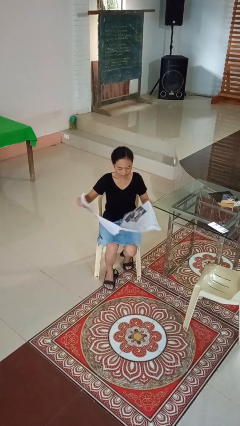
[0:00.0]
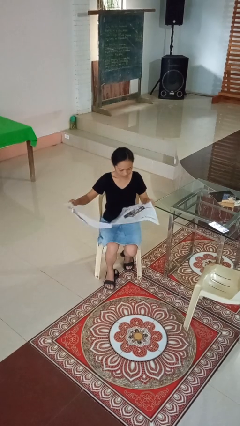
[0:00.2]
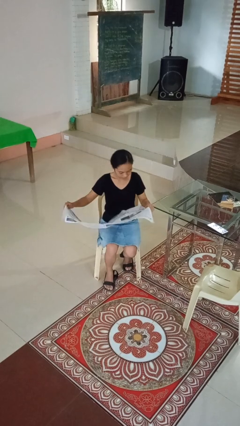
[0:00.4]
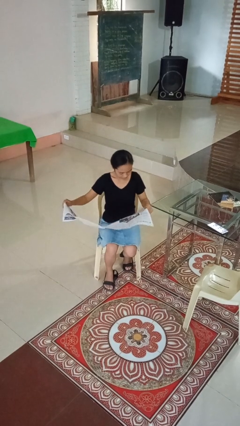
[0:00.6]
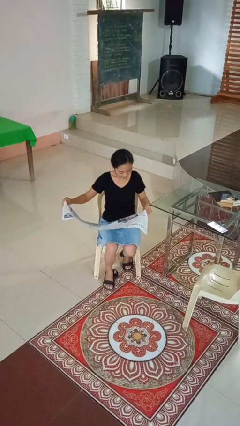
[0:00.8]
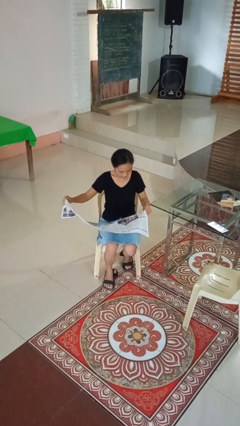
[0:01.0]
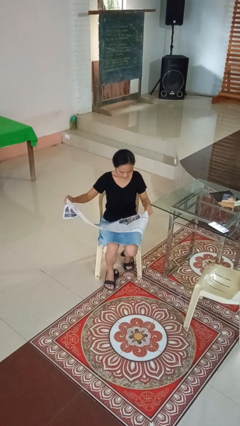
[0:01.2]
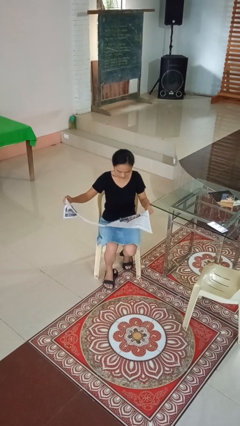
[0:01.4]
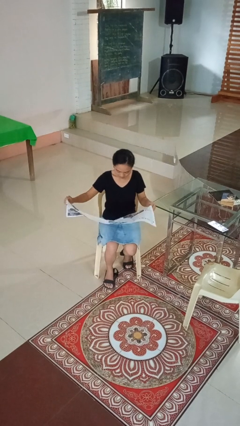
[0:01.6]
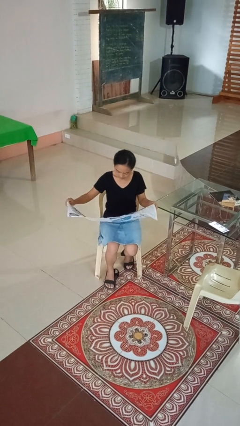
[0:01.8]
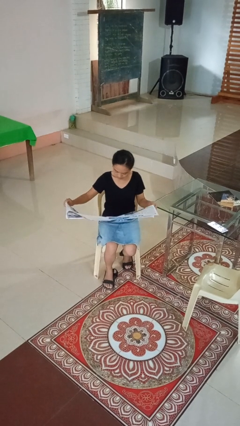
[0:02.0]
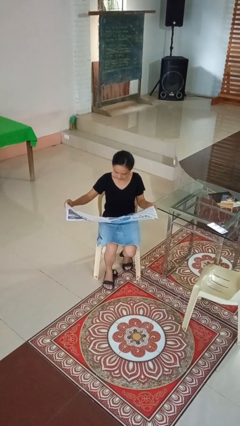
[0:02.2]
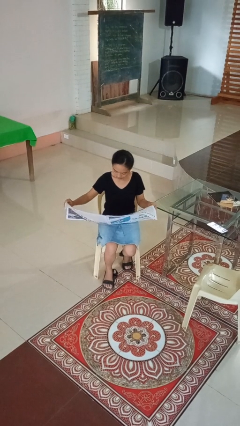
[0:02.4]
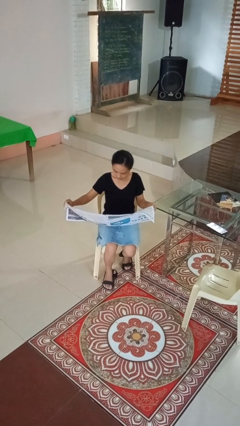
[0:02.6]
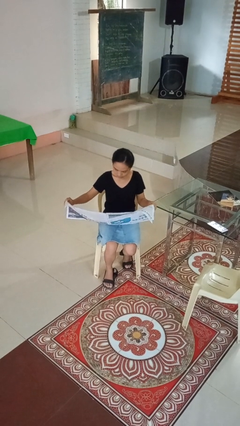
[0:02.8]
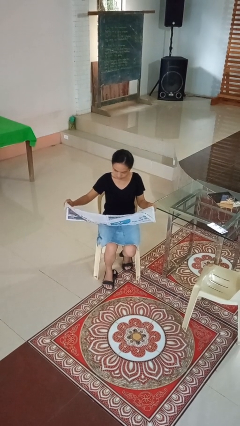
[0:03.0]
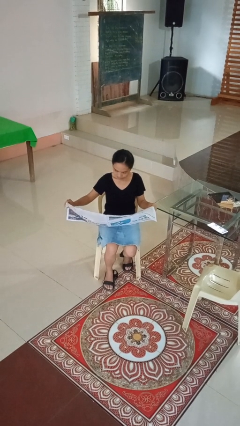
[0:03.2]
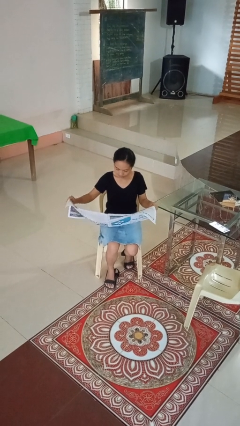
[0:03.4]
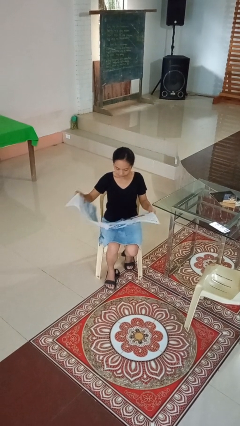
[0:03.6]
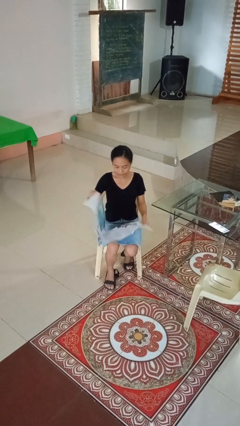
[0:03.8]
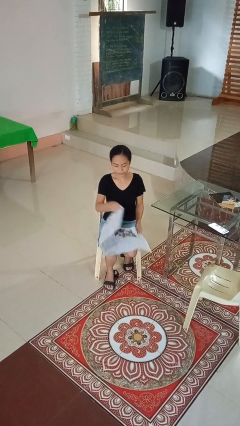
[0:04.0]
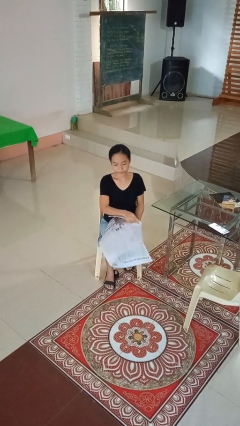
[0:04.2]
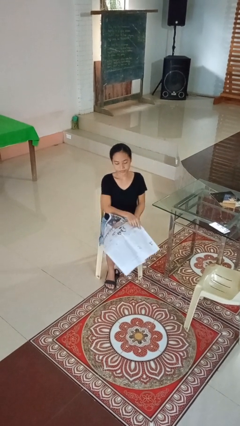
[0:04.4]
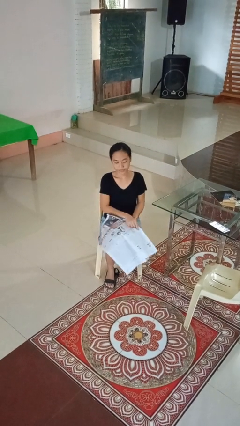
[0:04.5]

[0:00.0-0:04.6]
person reads newspaper

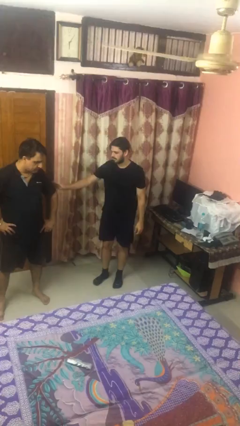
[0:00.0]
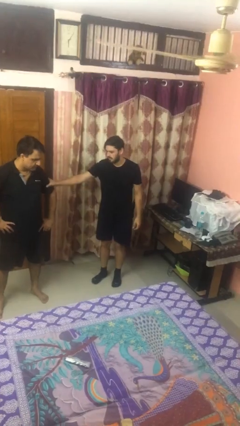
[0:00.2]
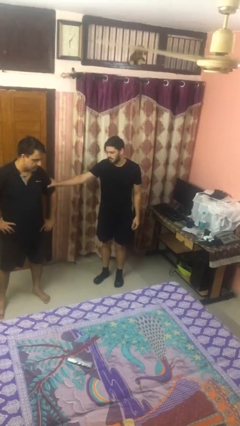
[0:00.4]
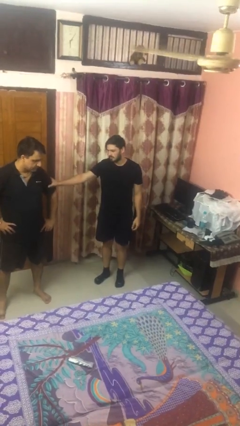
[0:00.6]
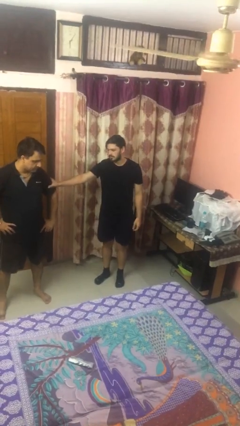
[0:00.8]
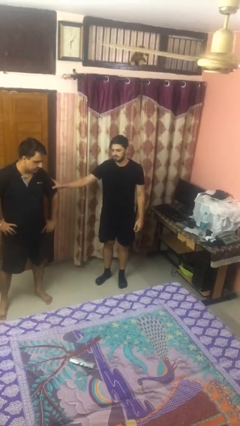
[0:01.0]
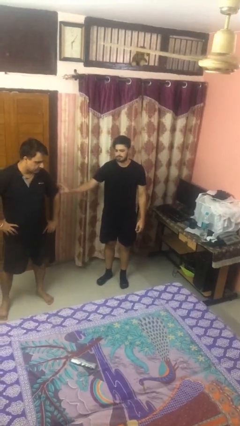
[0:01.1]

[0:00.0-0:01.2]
person grabs person by bicep

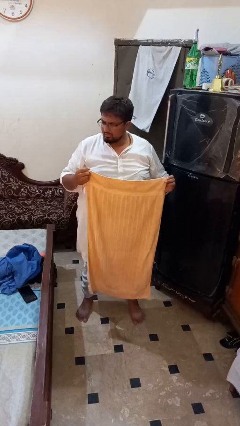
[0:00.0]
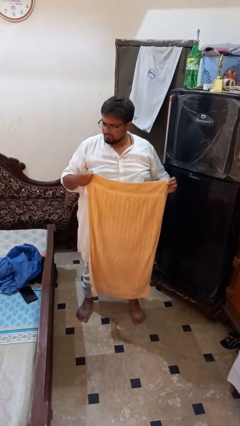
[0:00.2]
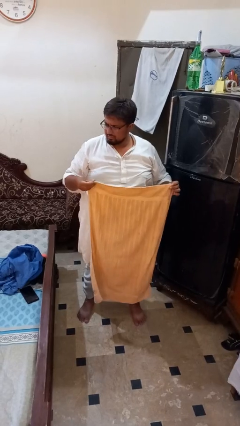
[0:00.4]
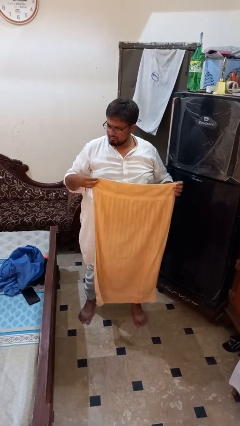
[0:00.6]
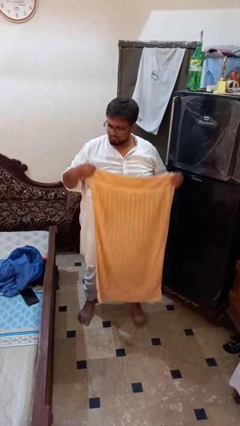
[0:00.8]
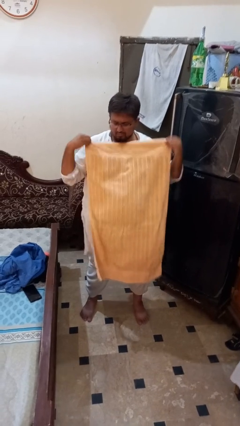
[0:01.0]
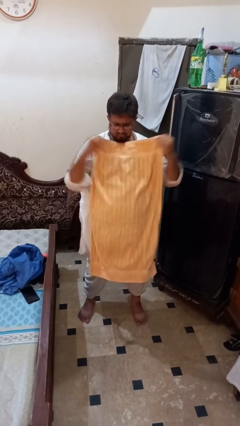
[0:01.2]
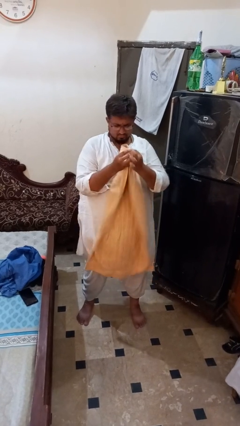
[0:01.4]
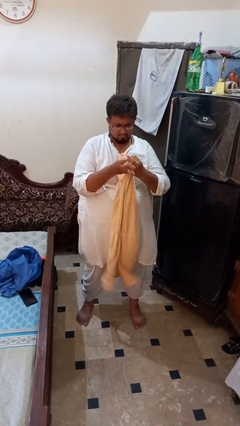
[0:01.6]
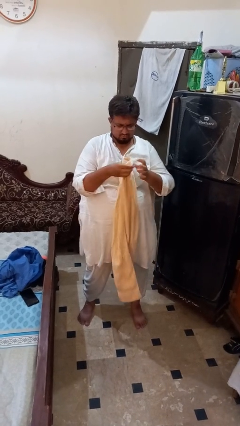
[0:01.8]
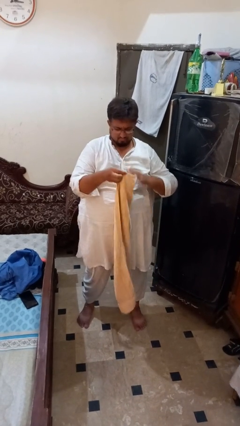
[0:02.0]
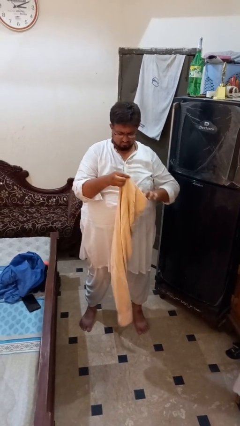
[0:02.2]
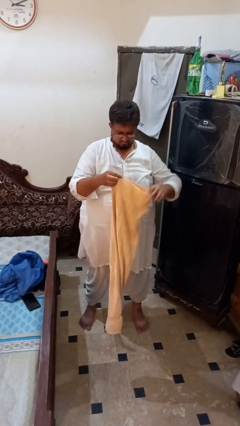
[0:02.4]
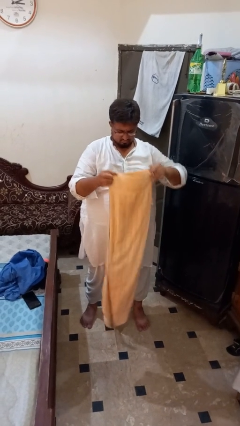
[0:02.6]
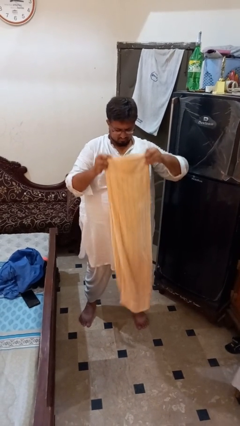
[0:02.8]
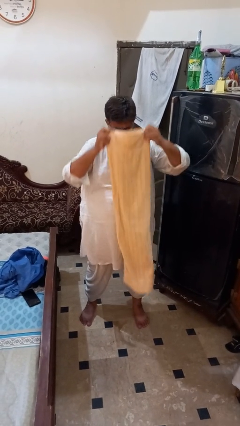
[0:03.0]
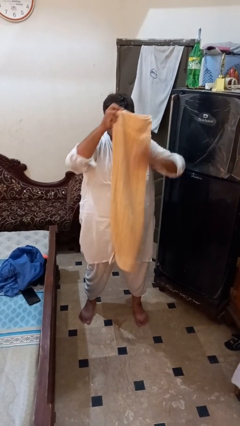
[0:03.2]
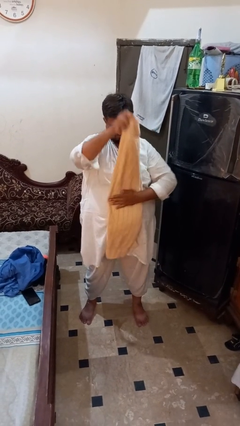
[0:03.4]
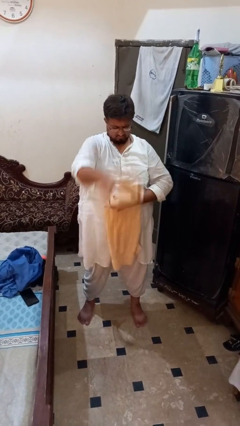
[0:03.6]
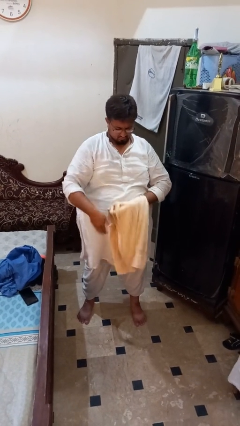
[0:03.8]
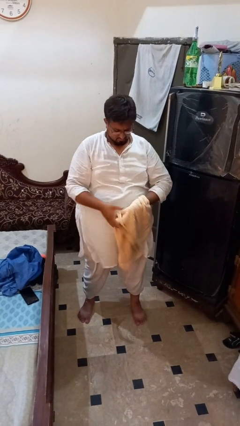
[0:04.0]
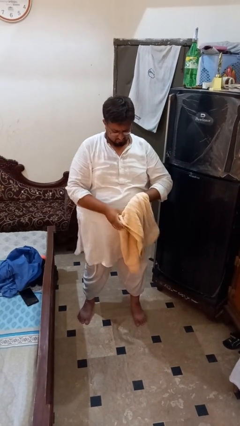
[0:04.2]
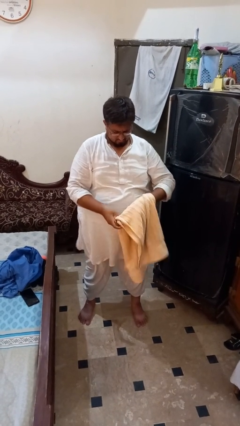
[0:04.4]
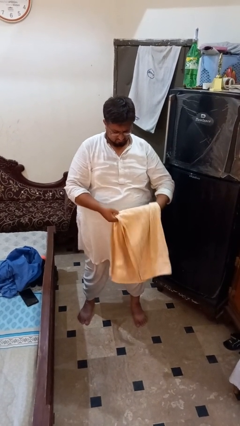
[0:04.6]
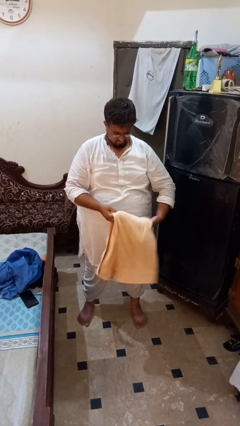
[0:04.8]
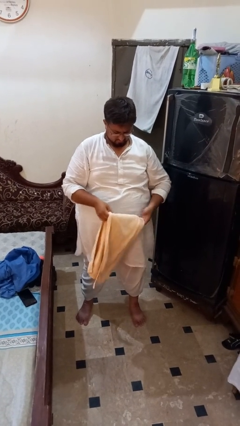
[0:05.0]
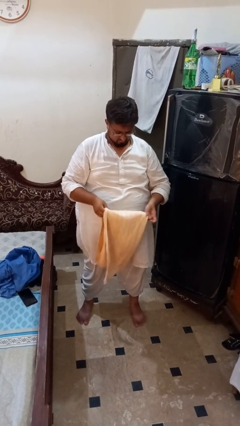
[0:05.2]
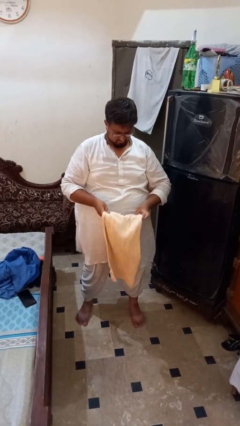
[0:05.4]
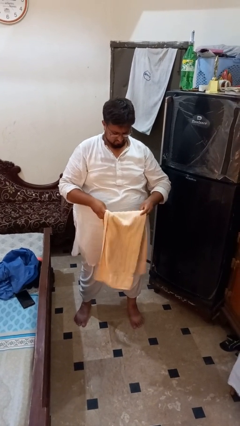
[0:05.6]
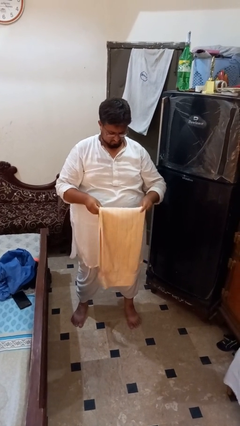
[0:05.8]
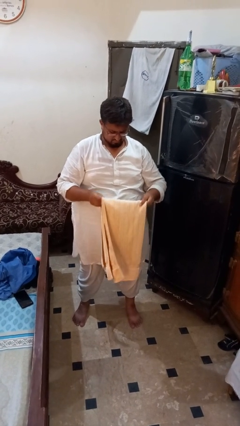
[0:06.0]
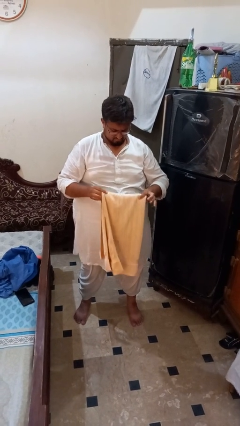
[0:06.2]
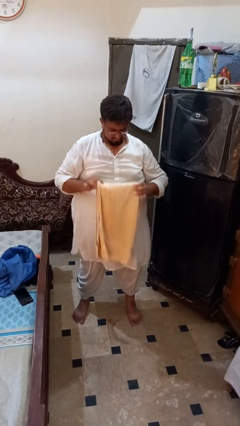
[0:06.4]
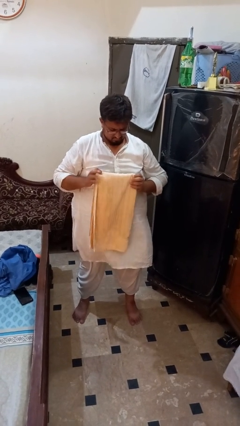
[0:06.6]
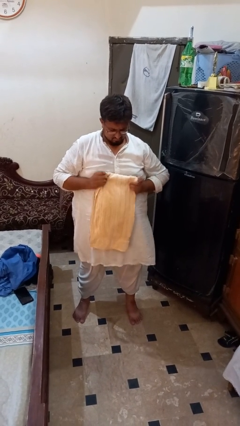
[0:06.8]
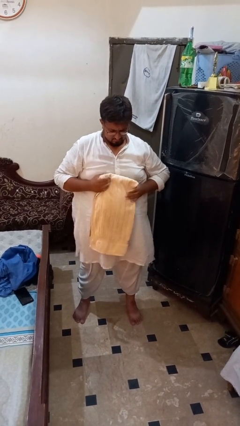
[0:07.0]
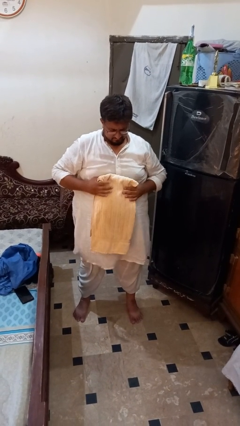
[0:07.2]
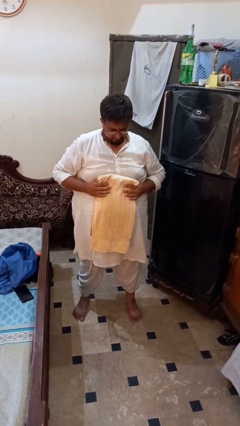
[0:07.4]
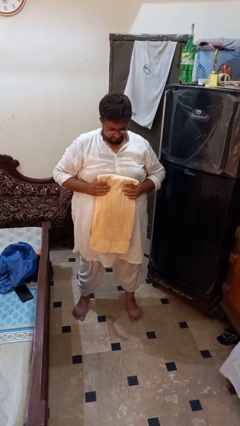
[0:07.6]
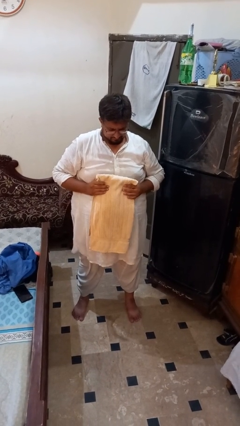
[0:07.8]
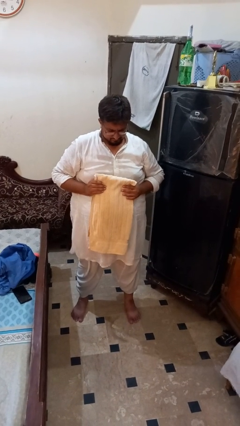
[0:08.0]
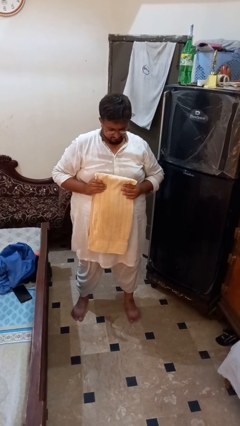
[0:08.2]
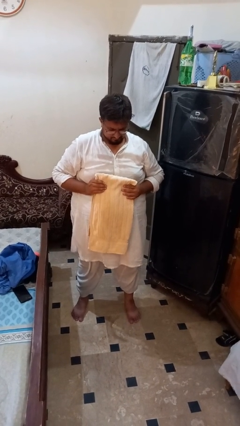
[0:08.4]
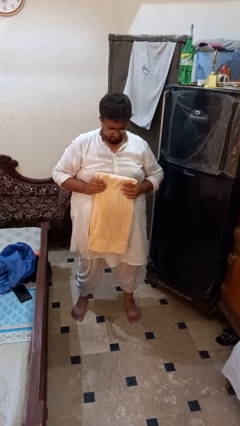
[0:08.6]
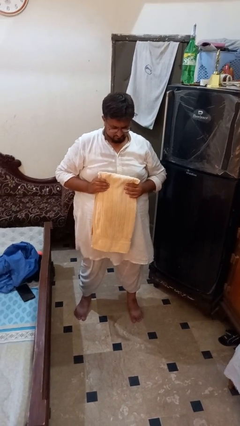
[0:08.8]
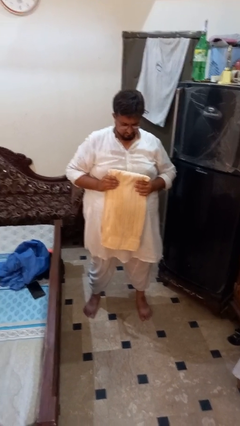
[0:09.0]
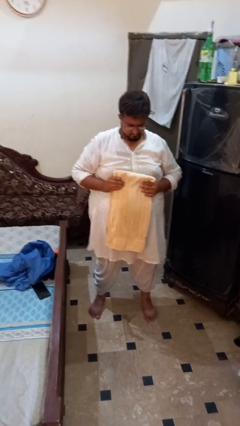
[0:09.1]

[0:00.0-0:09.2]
person folds towel

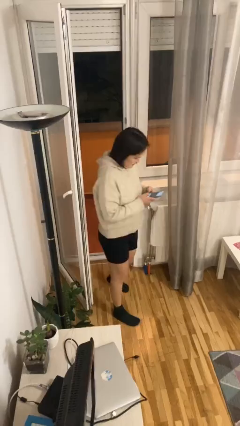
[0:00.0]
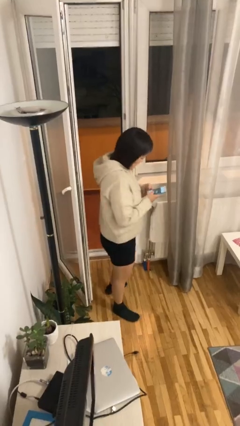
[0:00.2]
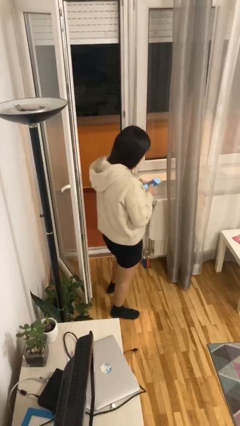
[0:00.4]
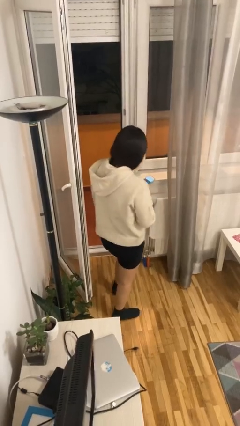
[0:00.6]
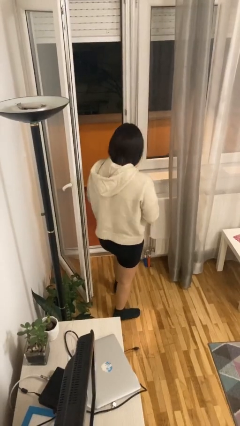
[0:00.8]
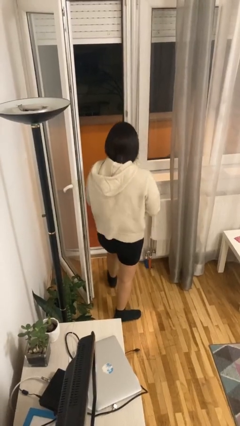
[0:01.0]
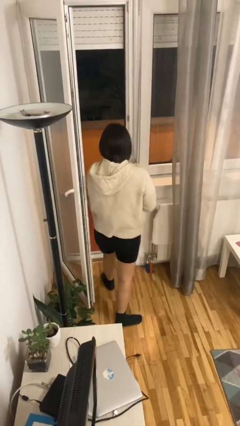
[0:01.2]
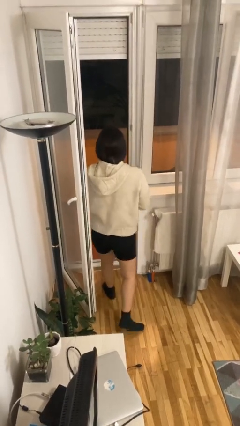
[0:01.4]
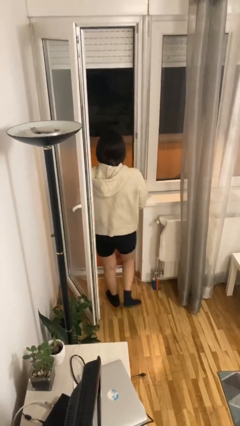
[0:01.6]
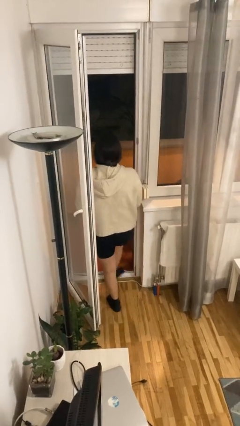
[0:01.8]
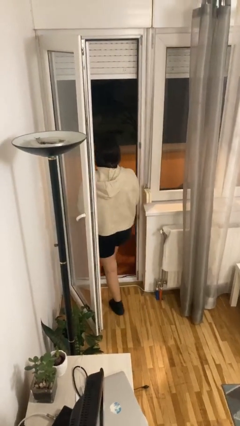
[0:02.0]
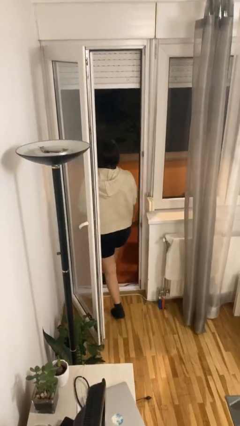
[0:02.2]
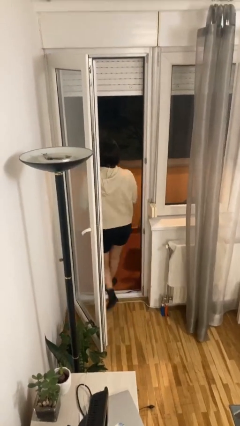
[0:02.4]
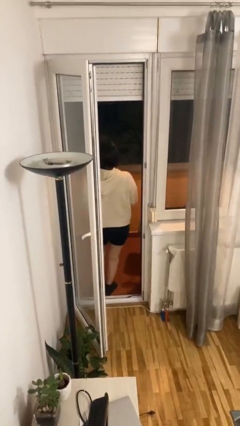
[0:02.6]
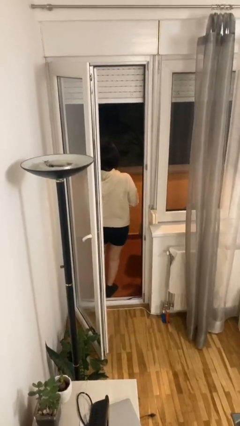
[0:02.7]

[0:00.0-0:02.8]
person exits scene through structure

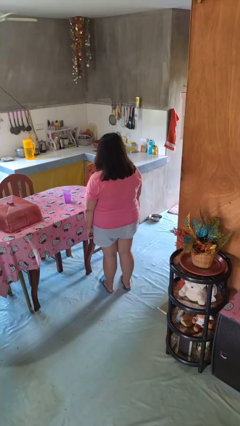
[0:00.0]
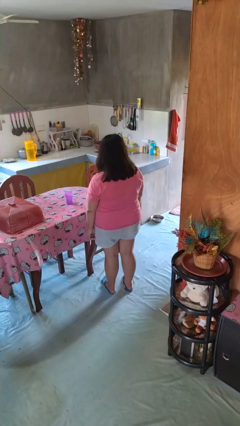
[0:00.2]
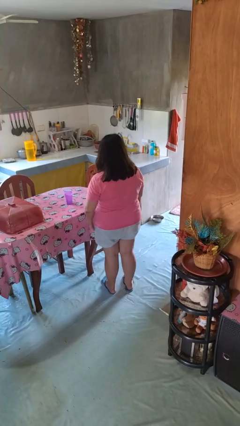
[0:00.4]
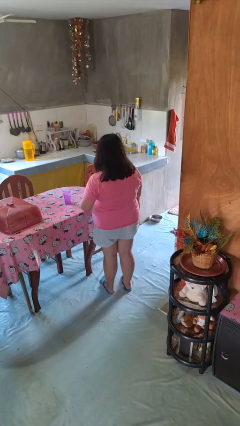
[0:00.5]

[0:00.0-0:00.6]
person knocks over glass
